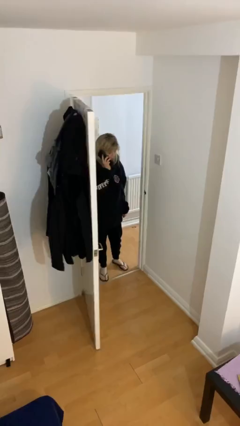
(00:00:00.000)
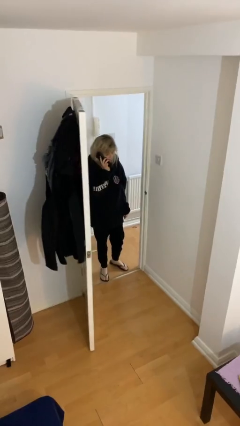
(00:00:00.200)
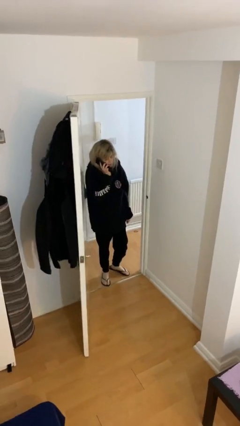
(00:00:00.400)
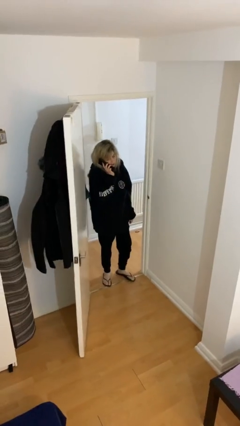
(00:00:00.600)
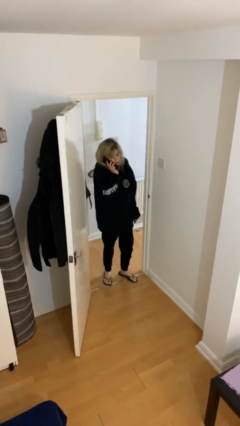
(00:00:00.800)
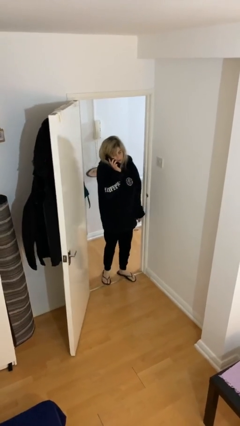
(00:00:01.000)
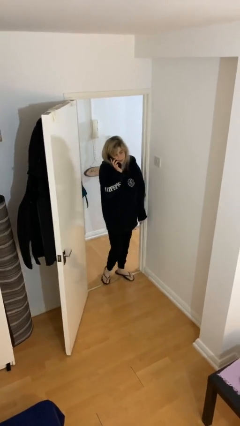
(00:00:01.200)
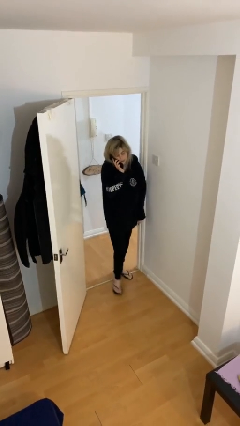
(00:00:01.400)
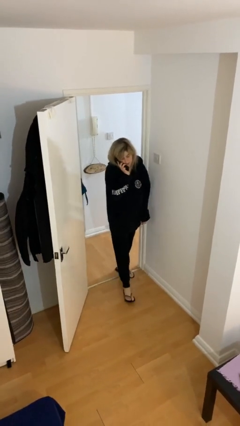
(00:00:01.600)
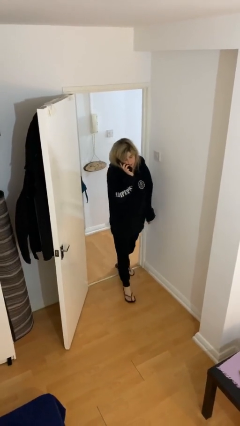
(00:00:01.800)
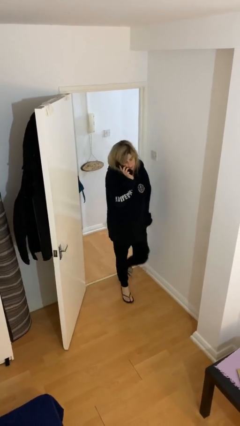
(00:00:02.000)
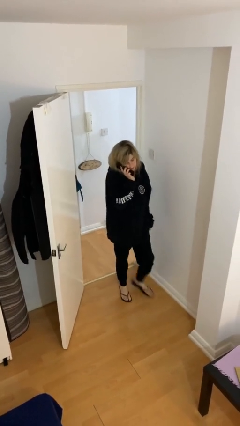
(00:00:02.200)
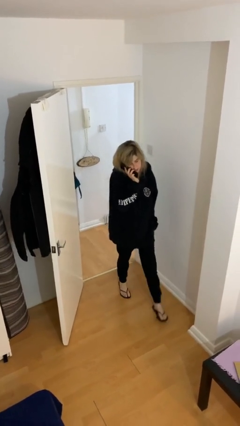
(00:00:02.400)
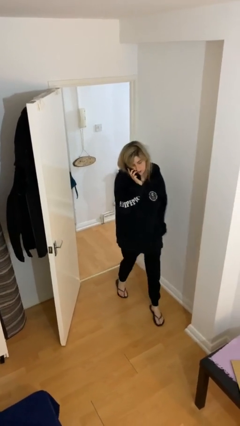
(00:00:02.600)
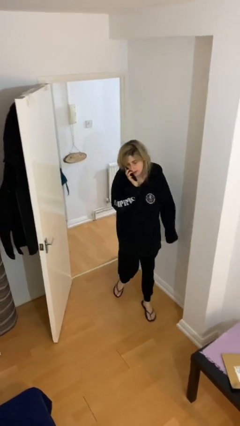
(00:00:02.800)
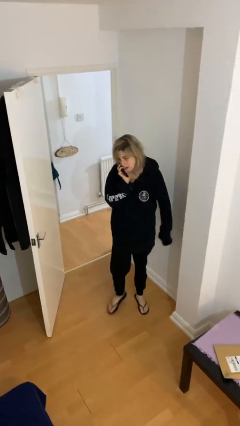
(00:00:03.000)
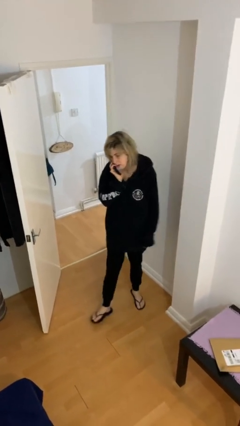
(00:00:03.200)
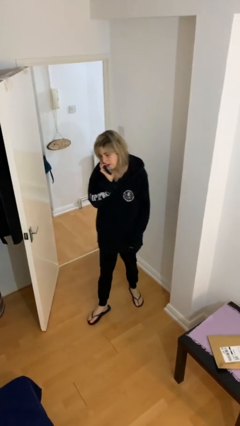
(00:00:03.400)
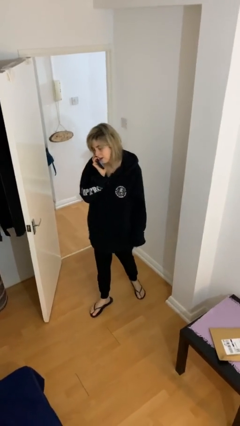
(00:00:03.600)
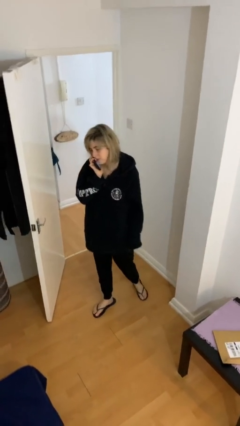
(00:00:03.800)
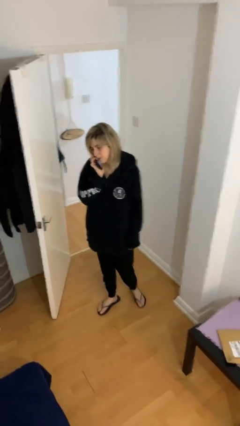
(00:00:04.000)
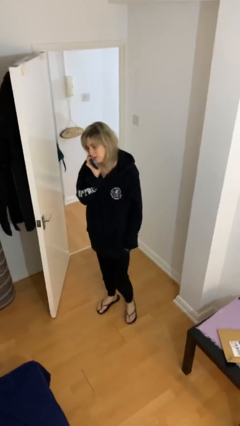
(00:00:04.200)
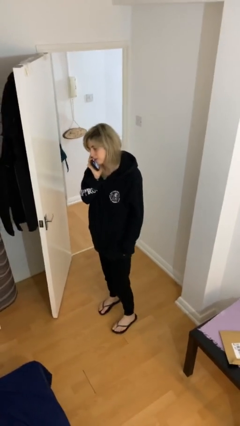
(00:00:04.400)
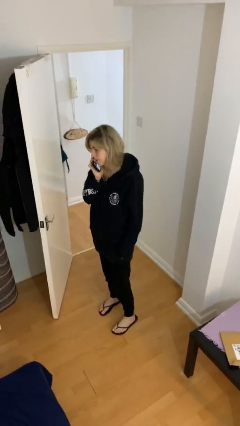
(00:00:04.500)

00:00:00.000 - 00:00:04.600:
person enters scene through structure

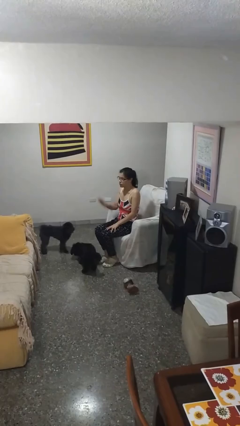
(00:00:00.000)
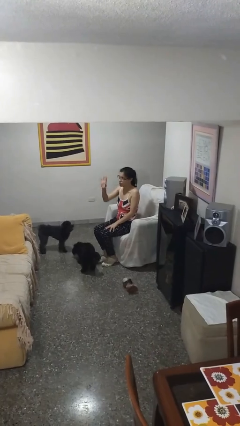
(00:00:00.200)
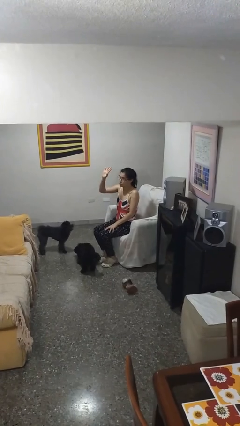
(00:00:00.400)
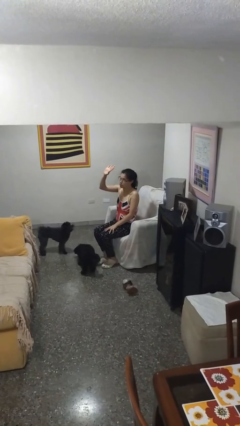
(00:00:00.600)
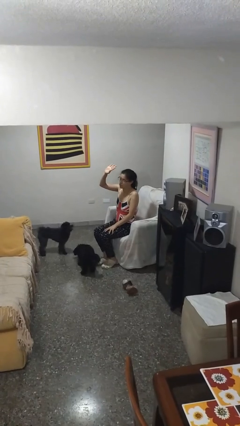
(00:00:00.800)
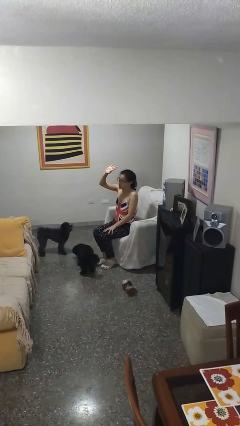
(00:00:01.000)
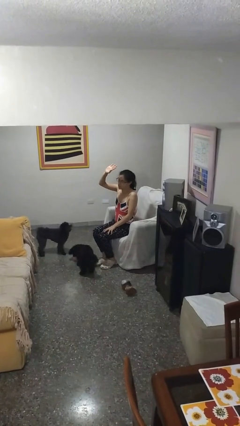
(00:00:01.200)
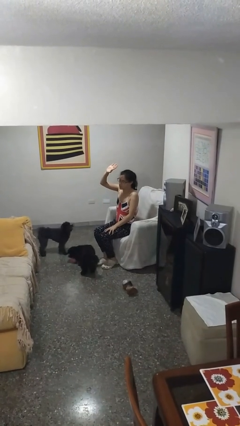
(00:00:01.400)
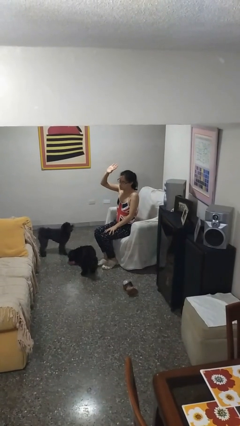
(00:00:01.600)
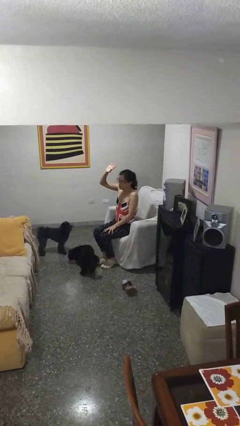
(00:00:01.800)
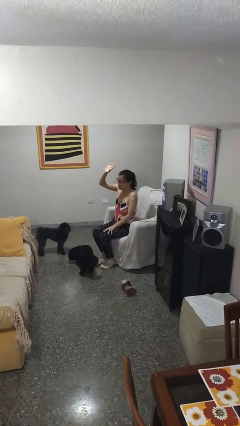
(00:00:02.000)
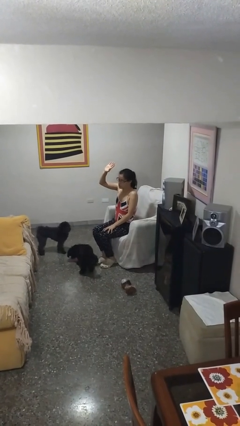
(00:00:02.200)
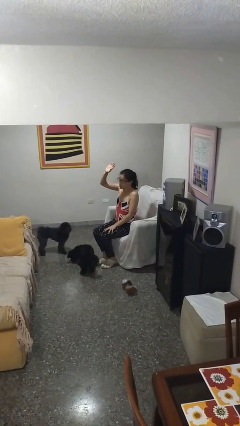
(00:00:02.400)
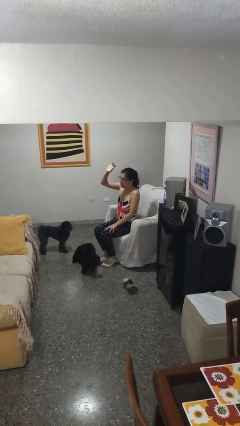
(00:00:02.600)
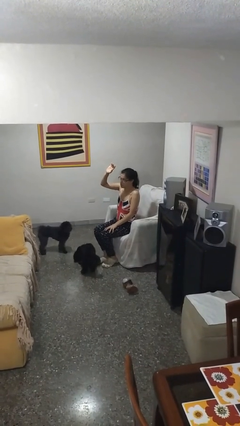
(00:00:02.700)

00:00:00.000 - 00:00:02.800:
person gestures raise hand

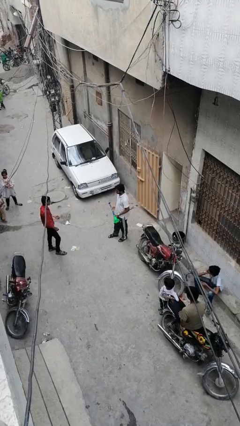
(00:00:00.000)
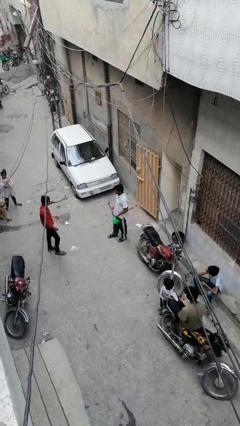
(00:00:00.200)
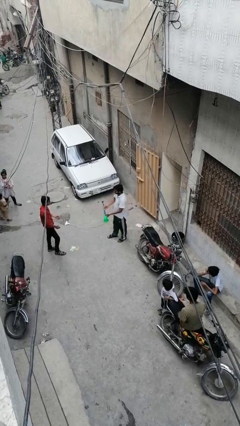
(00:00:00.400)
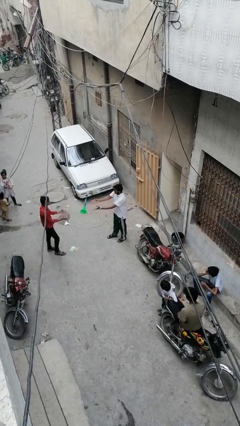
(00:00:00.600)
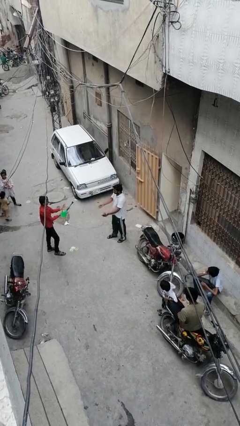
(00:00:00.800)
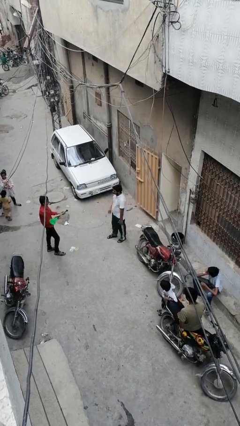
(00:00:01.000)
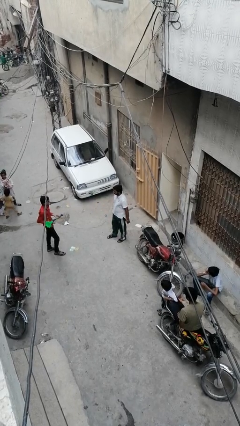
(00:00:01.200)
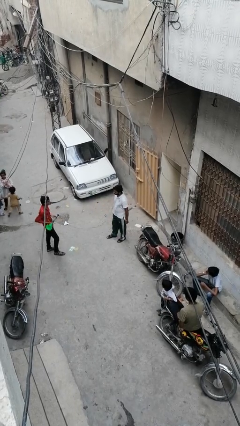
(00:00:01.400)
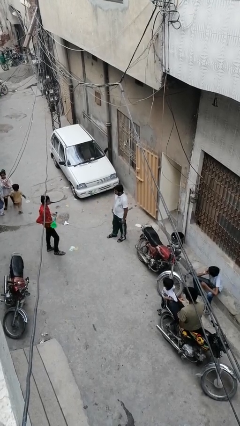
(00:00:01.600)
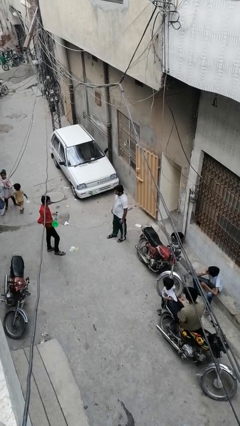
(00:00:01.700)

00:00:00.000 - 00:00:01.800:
person throws object to person

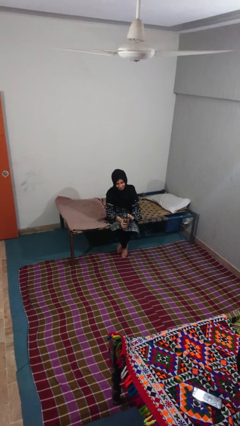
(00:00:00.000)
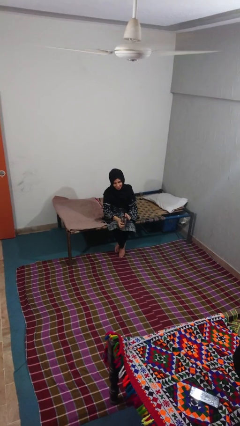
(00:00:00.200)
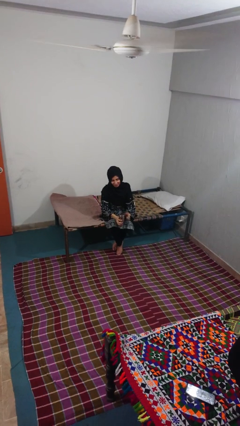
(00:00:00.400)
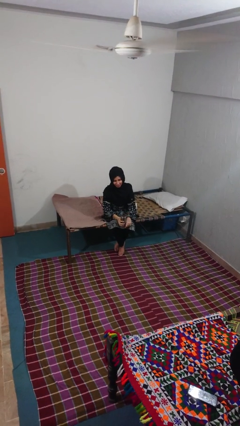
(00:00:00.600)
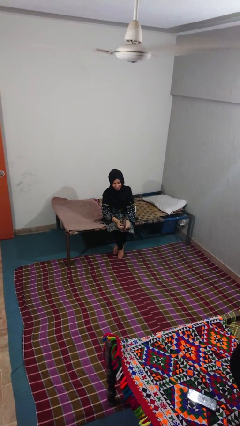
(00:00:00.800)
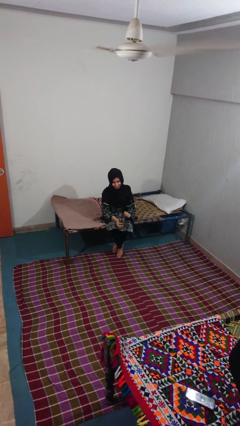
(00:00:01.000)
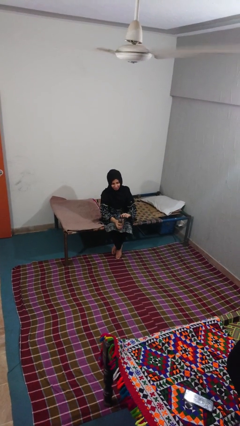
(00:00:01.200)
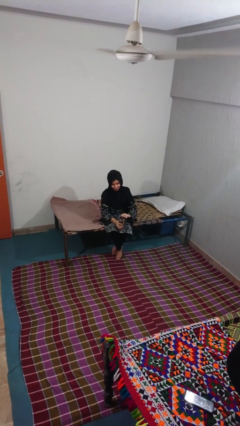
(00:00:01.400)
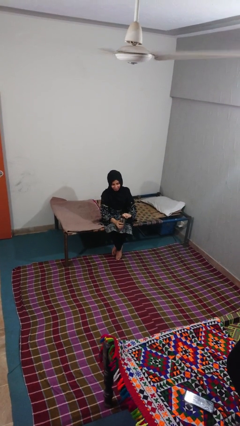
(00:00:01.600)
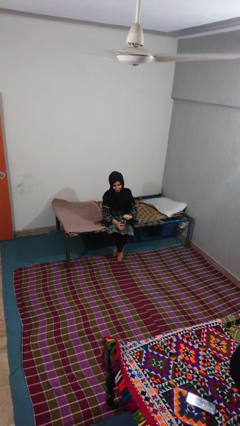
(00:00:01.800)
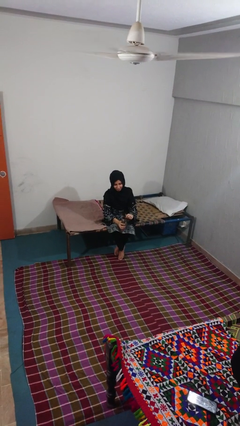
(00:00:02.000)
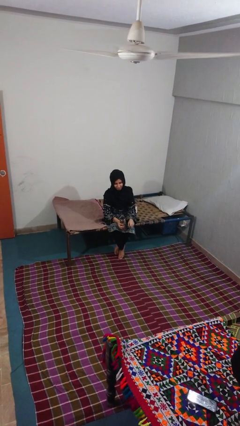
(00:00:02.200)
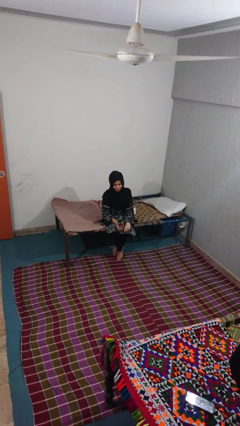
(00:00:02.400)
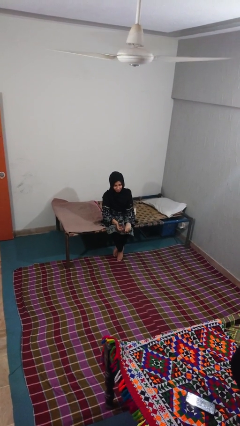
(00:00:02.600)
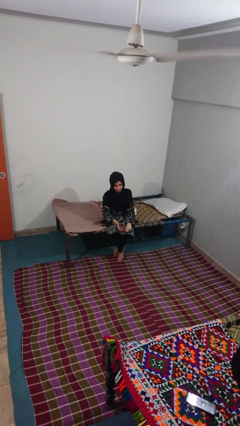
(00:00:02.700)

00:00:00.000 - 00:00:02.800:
person opens beverage can

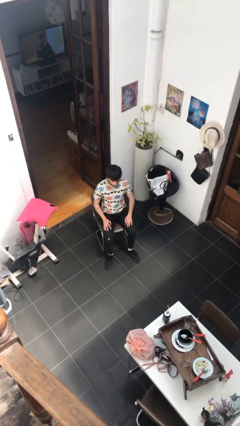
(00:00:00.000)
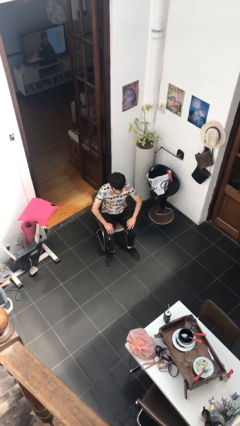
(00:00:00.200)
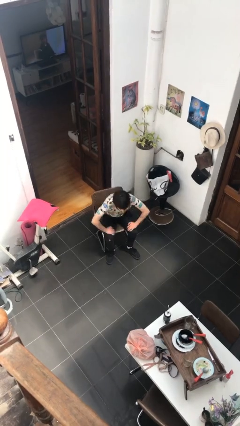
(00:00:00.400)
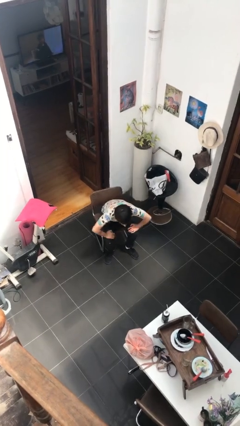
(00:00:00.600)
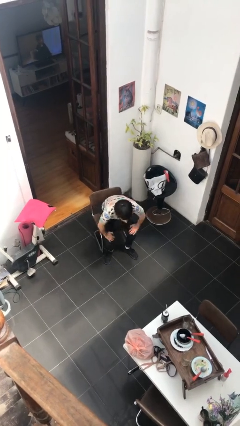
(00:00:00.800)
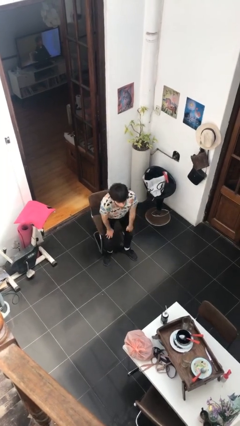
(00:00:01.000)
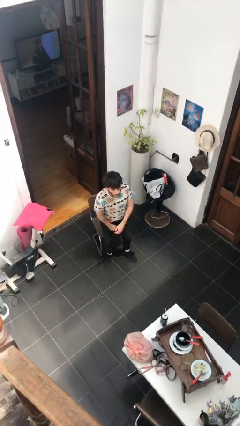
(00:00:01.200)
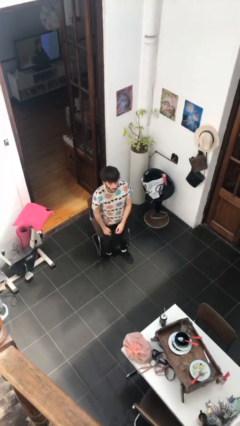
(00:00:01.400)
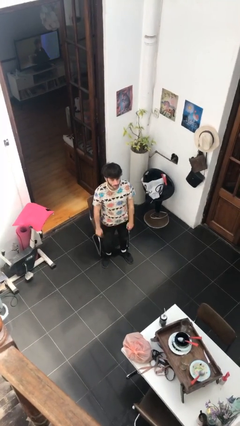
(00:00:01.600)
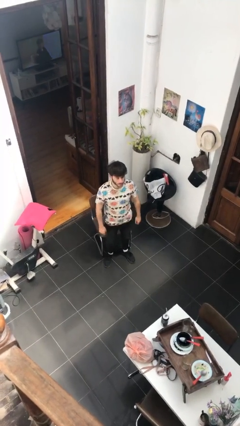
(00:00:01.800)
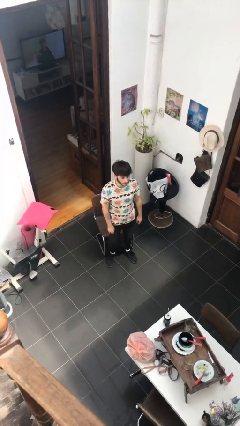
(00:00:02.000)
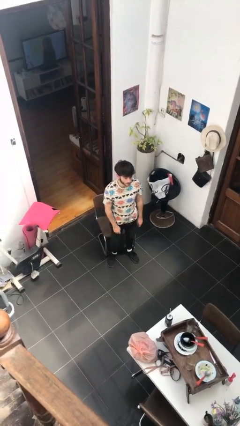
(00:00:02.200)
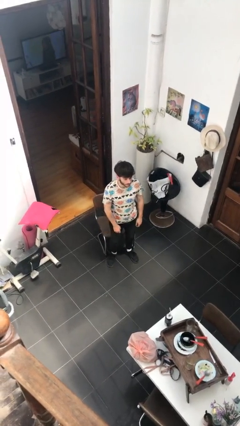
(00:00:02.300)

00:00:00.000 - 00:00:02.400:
person stands up

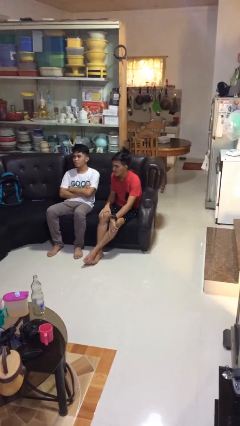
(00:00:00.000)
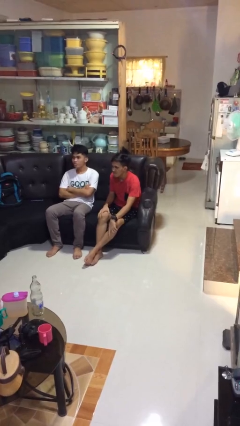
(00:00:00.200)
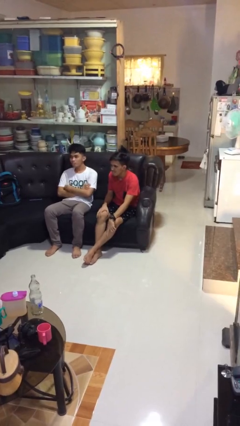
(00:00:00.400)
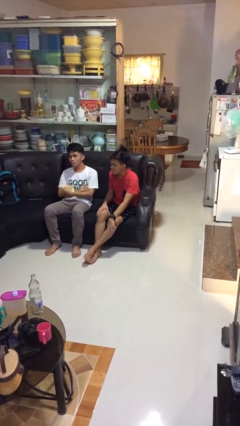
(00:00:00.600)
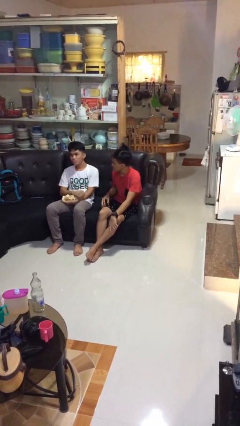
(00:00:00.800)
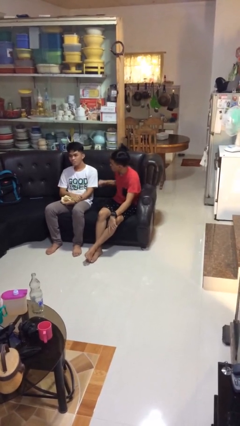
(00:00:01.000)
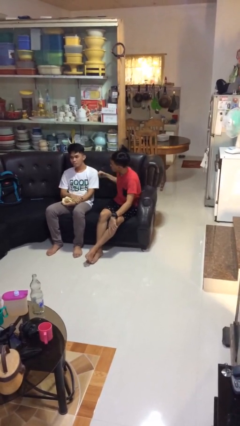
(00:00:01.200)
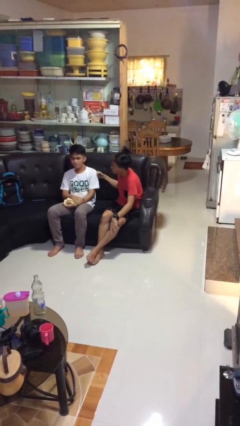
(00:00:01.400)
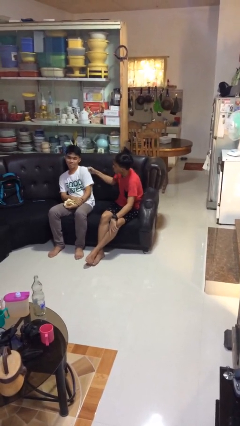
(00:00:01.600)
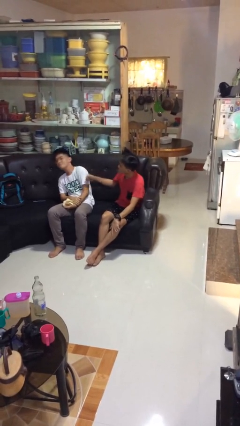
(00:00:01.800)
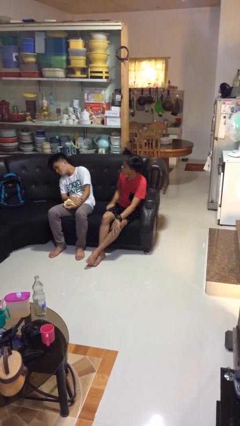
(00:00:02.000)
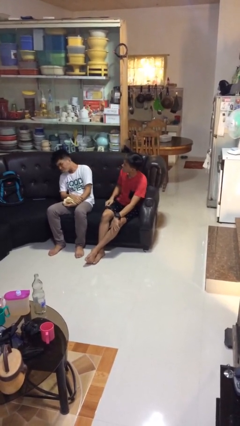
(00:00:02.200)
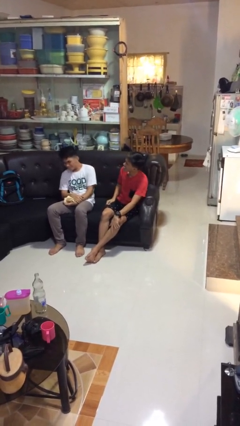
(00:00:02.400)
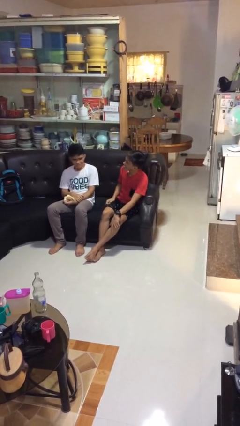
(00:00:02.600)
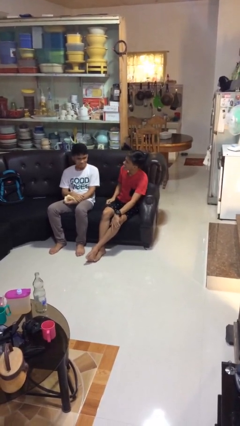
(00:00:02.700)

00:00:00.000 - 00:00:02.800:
person pounds shoulders of person
